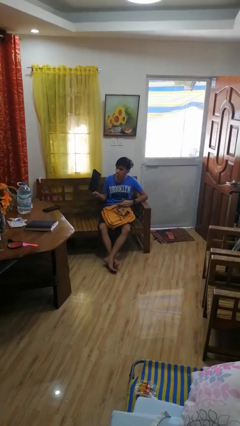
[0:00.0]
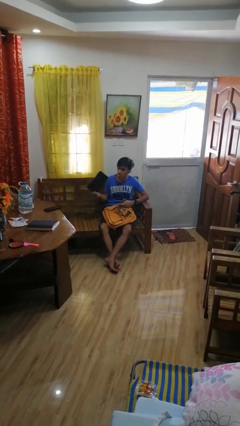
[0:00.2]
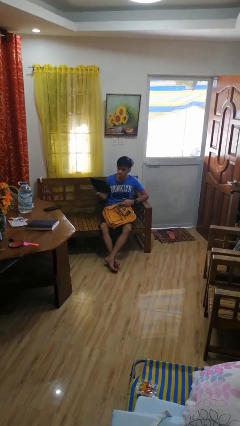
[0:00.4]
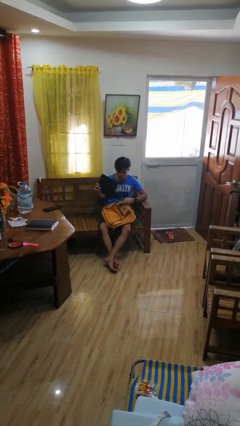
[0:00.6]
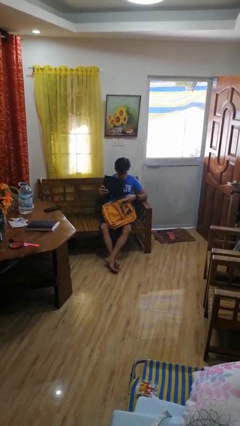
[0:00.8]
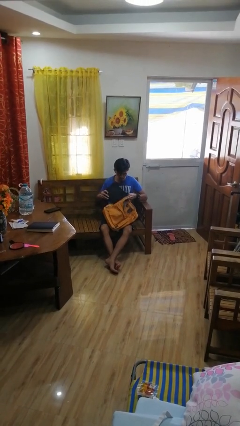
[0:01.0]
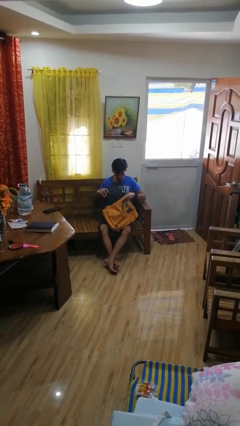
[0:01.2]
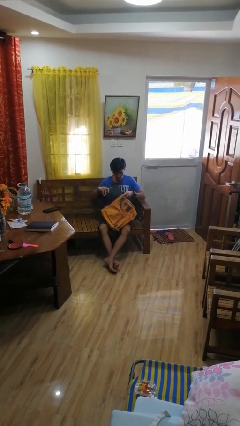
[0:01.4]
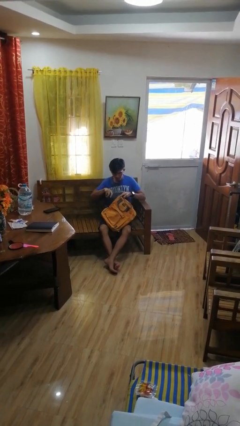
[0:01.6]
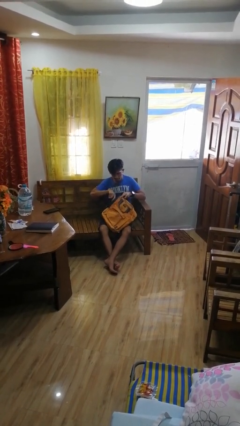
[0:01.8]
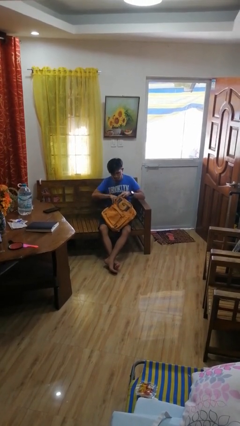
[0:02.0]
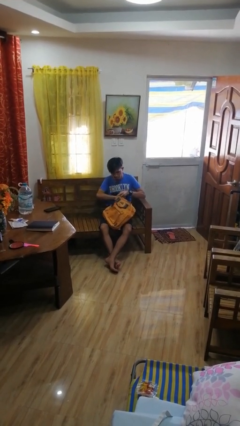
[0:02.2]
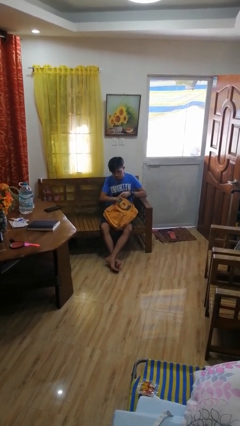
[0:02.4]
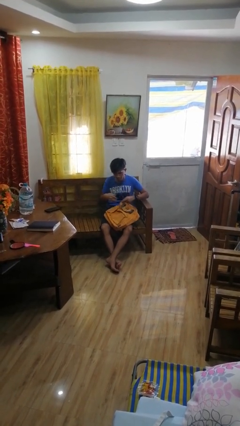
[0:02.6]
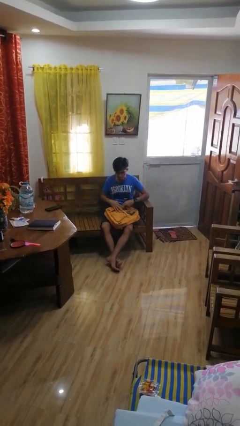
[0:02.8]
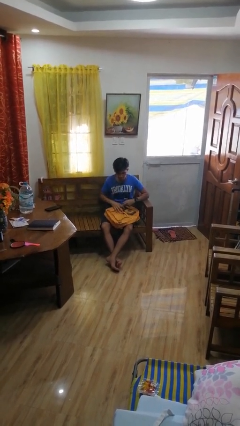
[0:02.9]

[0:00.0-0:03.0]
person puts object into backpack

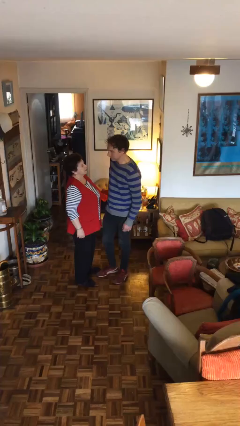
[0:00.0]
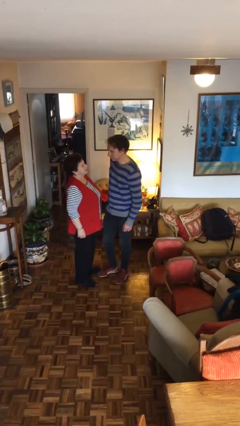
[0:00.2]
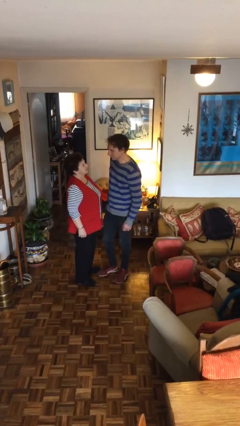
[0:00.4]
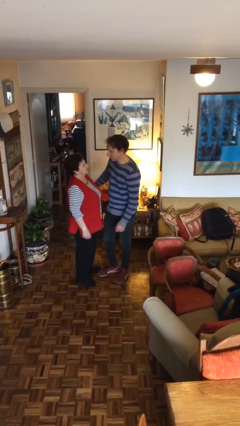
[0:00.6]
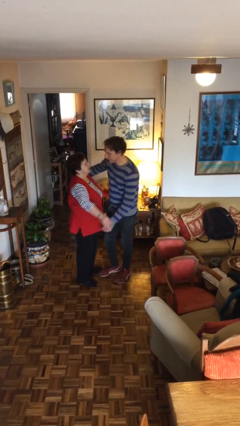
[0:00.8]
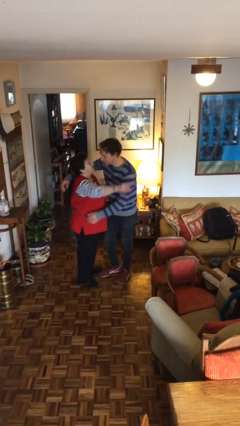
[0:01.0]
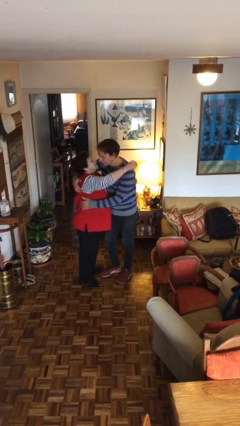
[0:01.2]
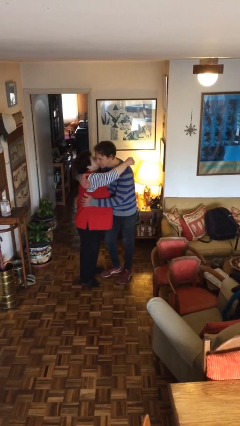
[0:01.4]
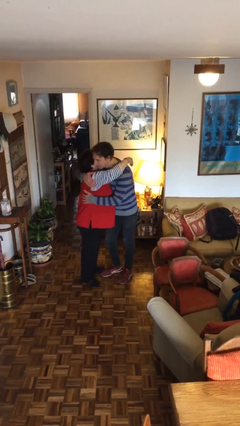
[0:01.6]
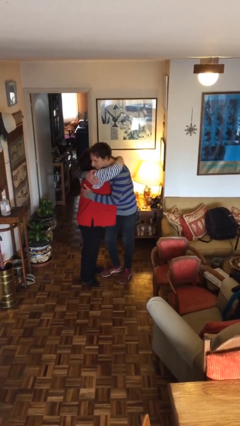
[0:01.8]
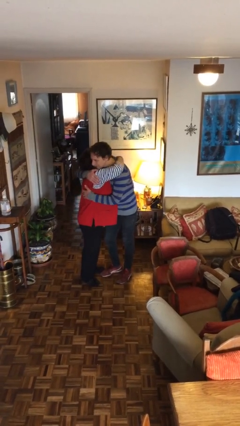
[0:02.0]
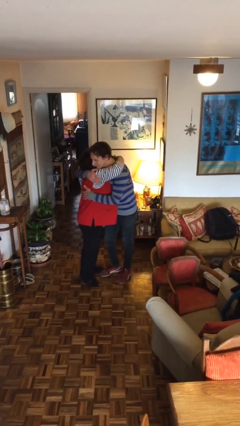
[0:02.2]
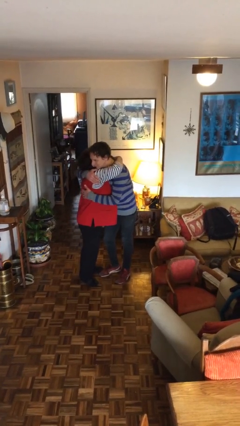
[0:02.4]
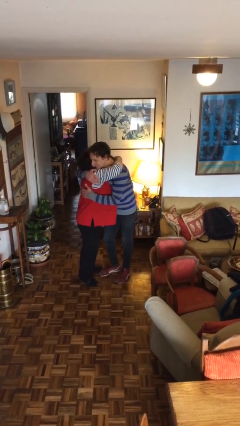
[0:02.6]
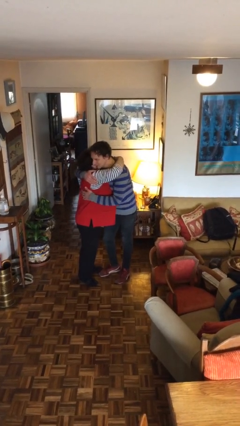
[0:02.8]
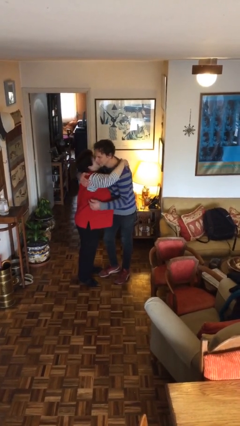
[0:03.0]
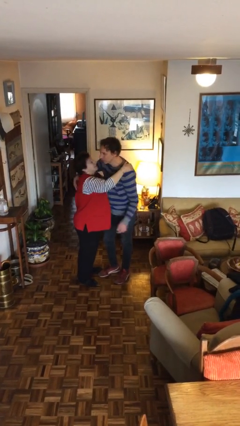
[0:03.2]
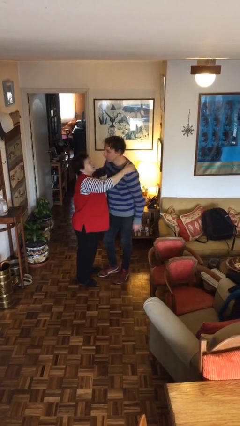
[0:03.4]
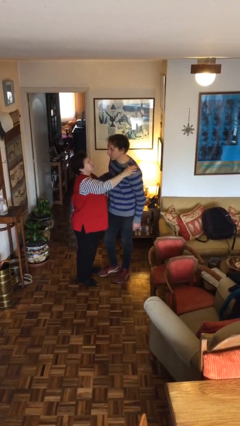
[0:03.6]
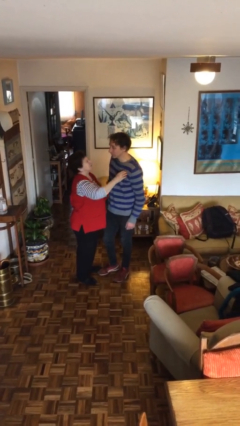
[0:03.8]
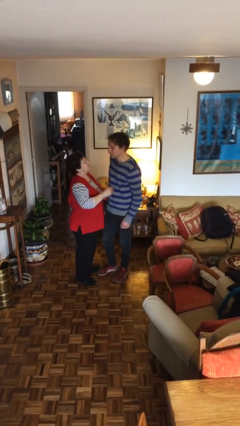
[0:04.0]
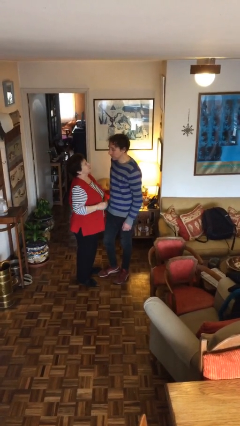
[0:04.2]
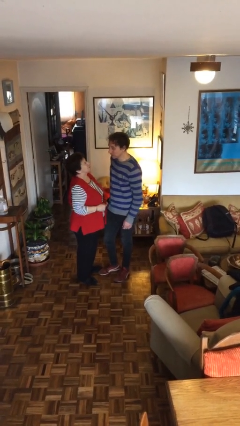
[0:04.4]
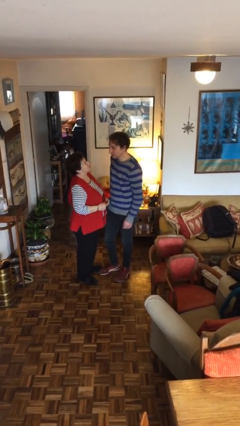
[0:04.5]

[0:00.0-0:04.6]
person embraces person

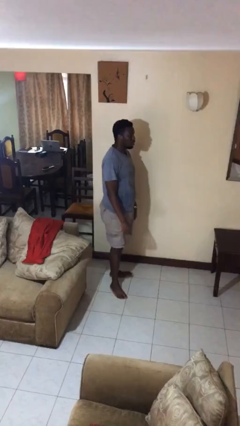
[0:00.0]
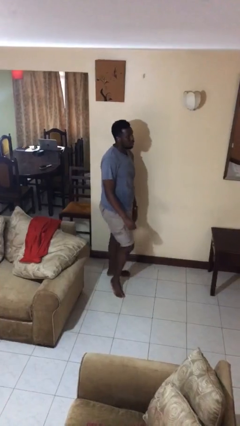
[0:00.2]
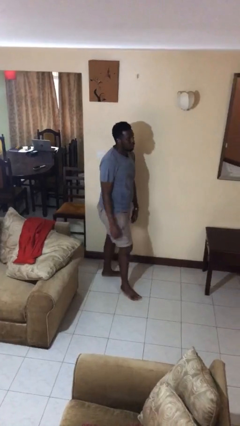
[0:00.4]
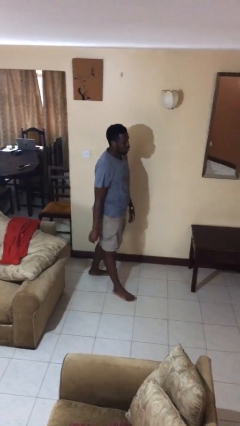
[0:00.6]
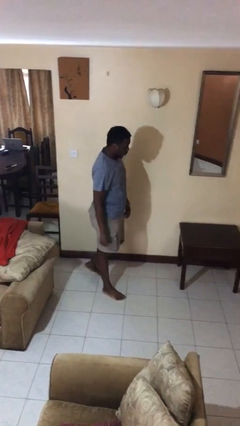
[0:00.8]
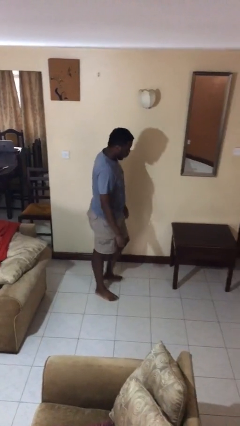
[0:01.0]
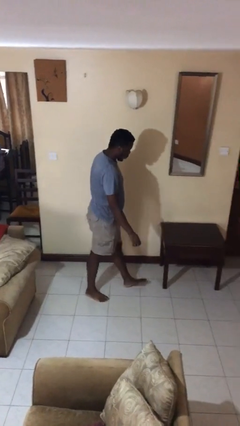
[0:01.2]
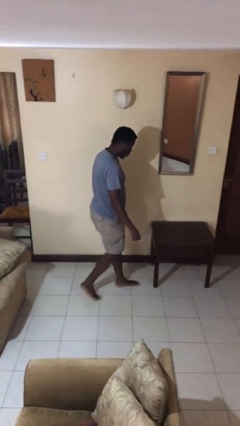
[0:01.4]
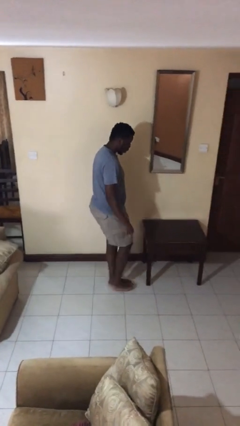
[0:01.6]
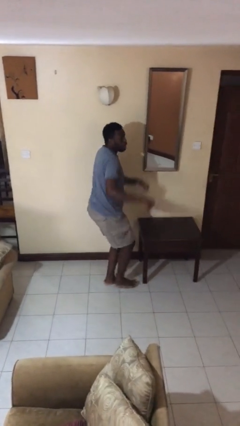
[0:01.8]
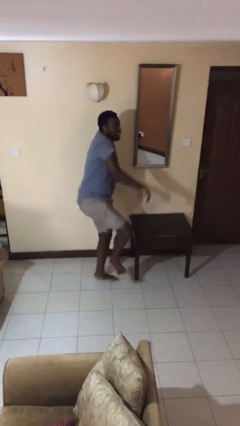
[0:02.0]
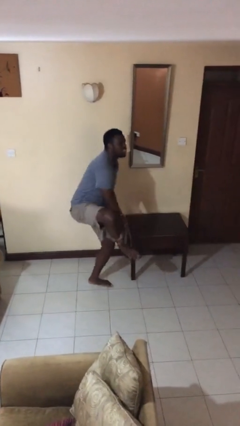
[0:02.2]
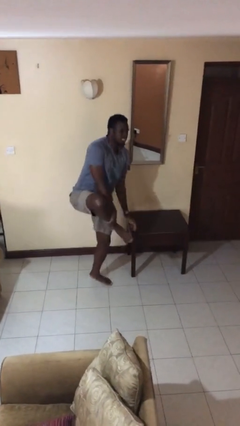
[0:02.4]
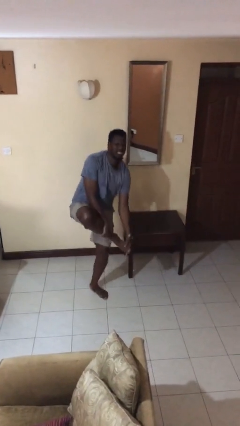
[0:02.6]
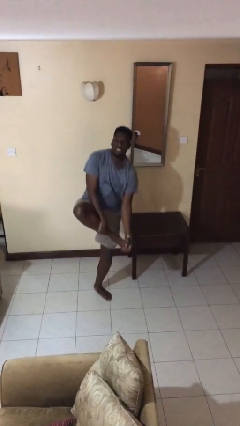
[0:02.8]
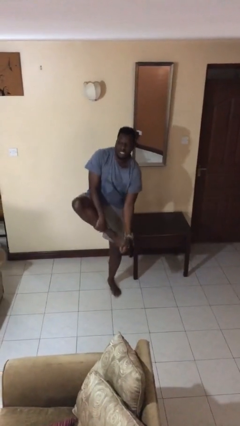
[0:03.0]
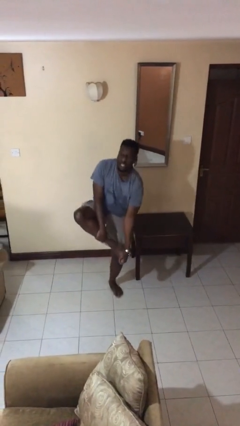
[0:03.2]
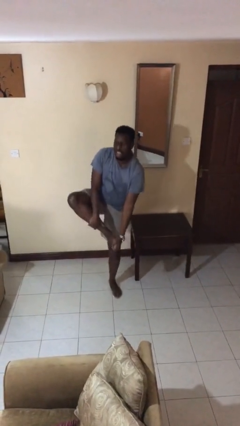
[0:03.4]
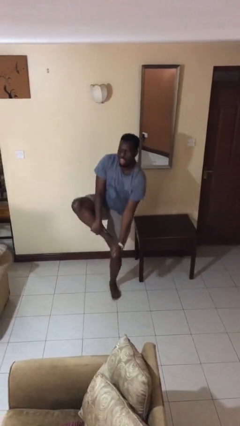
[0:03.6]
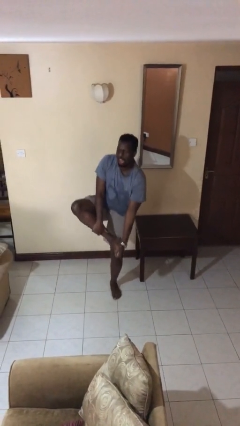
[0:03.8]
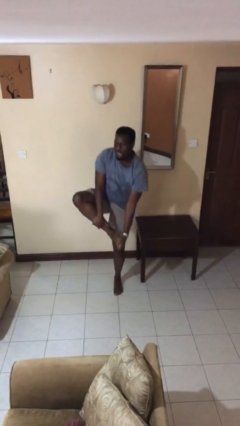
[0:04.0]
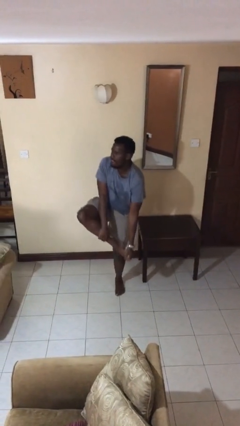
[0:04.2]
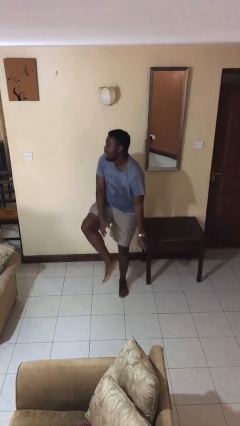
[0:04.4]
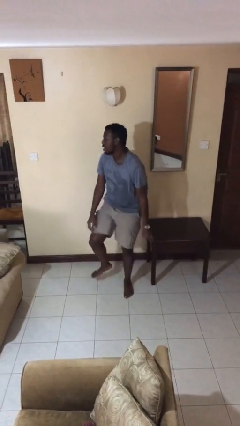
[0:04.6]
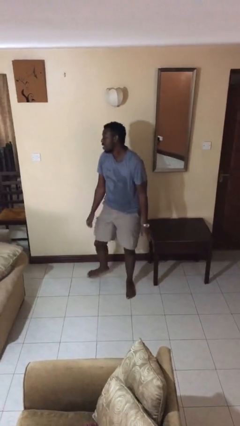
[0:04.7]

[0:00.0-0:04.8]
person stubs toe

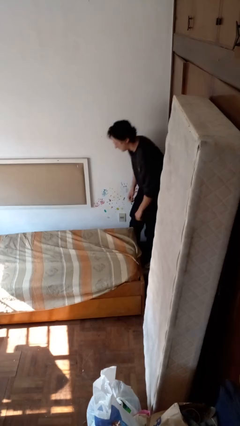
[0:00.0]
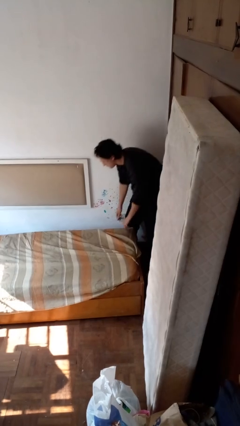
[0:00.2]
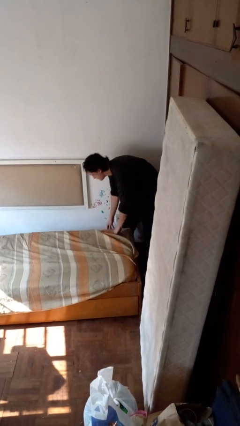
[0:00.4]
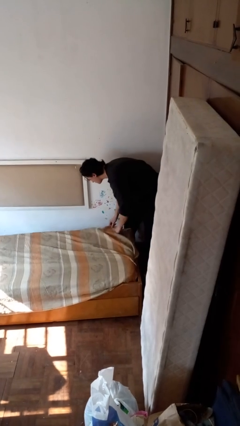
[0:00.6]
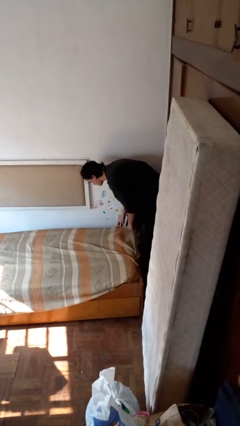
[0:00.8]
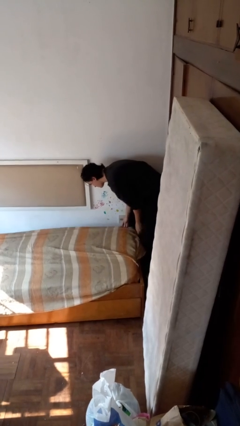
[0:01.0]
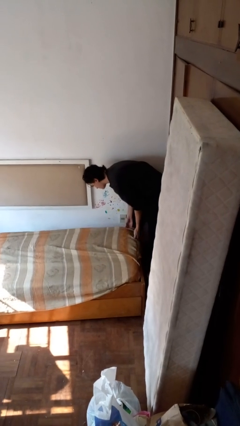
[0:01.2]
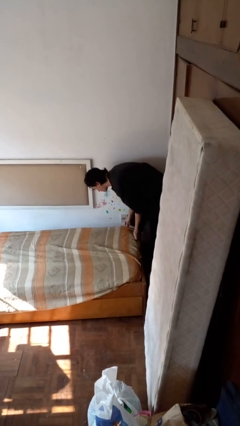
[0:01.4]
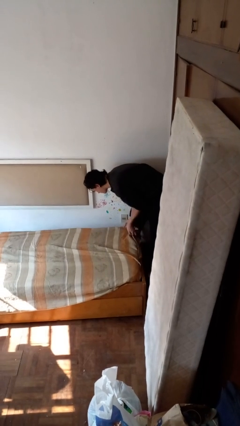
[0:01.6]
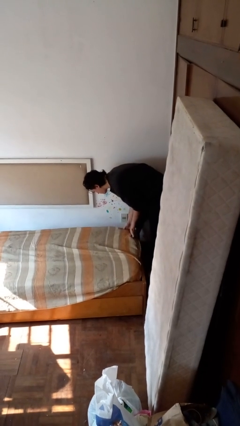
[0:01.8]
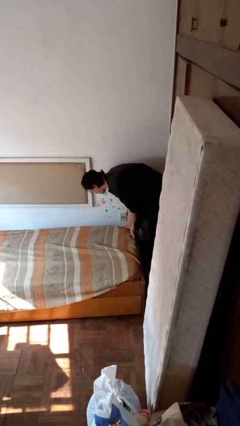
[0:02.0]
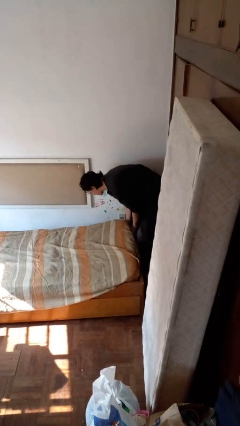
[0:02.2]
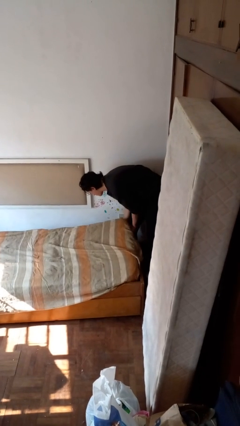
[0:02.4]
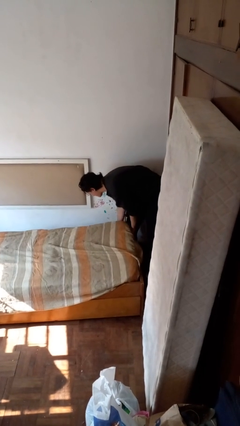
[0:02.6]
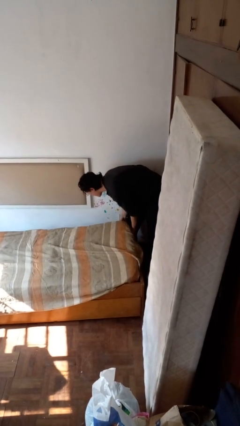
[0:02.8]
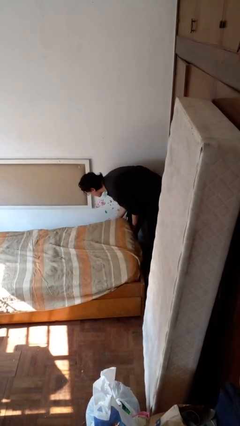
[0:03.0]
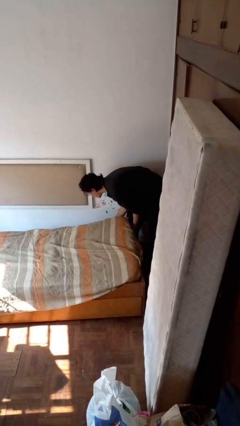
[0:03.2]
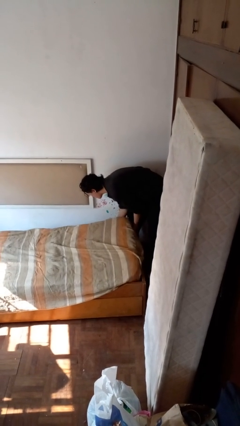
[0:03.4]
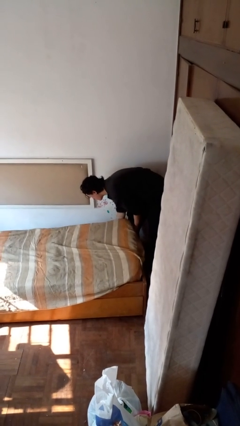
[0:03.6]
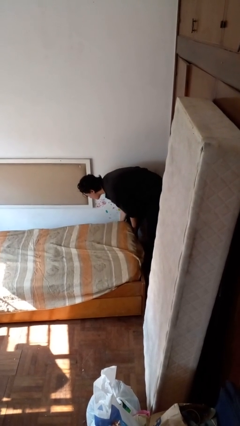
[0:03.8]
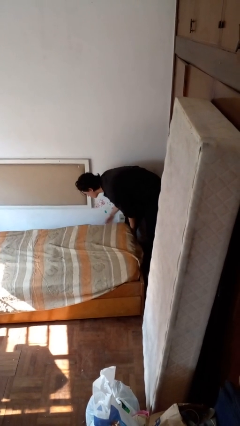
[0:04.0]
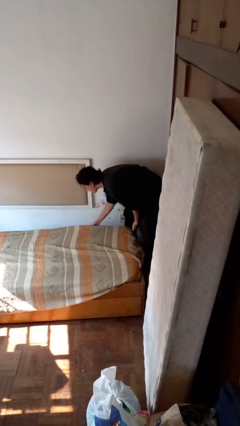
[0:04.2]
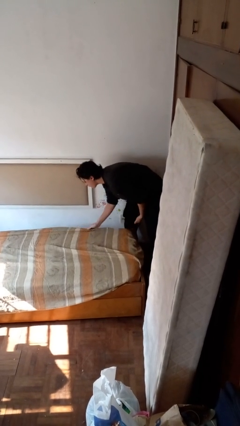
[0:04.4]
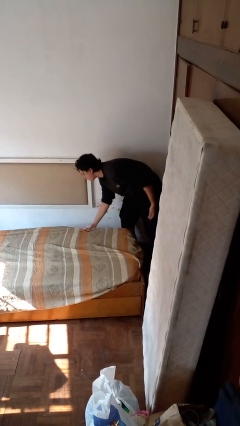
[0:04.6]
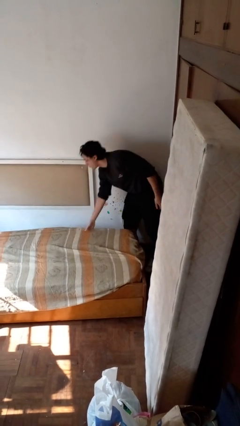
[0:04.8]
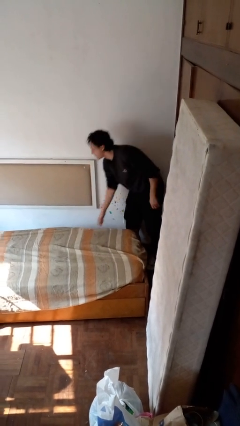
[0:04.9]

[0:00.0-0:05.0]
person makes bed

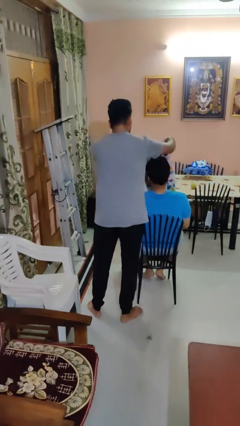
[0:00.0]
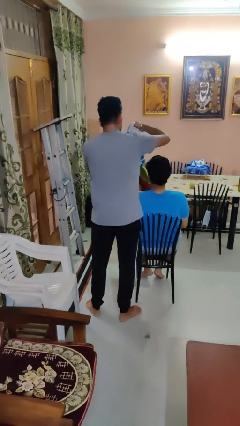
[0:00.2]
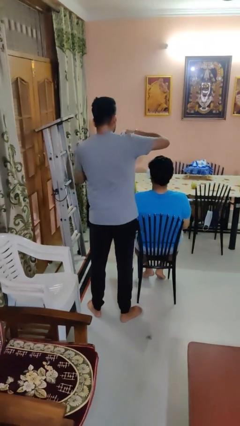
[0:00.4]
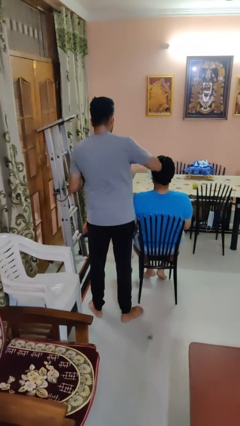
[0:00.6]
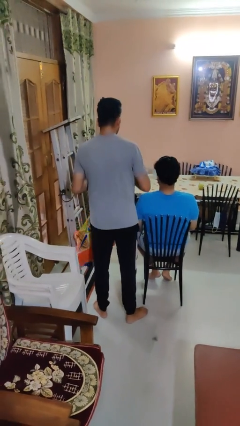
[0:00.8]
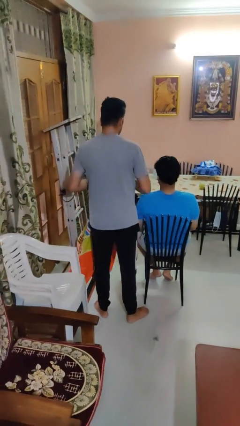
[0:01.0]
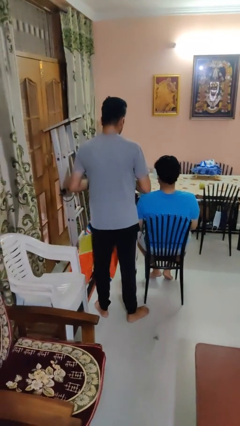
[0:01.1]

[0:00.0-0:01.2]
person uncovers friend with blanket
